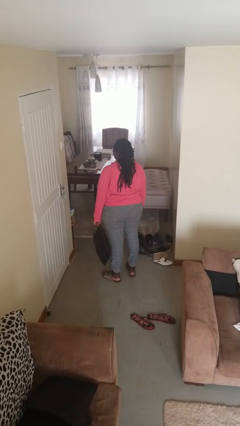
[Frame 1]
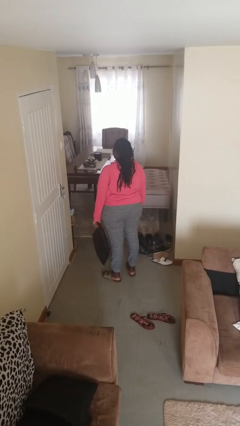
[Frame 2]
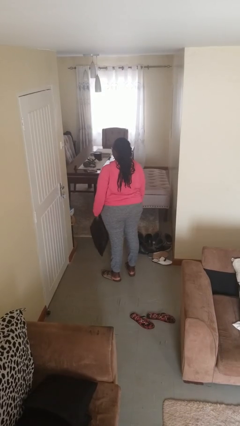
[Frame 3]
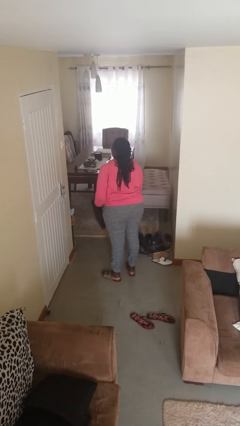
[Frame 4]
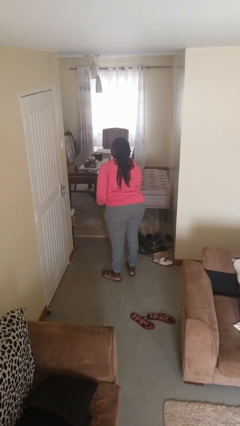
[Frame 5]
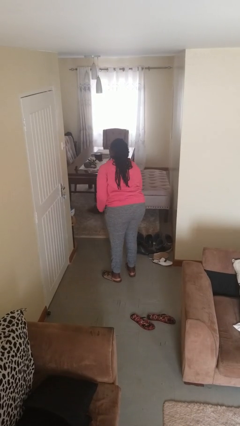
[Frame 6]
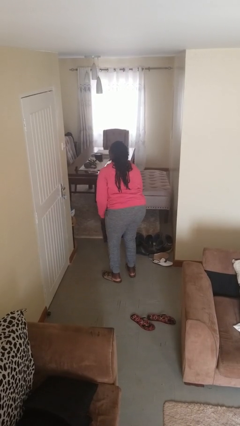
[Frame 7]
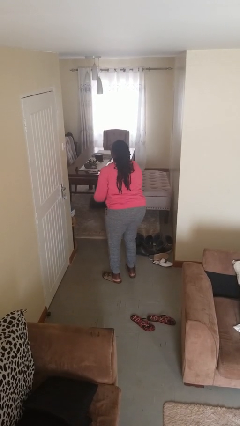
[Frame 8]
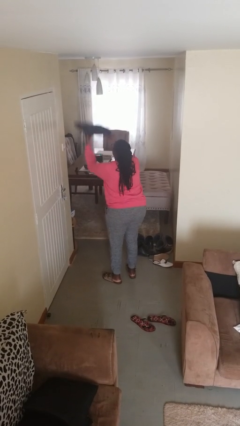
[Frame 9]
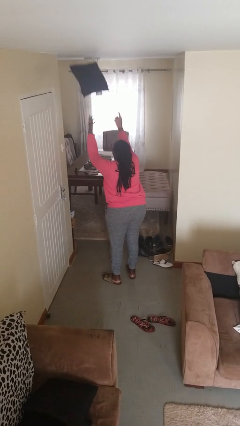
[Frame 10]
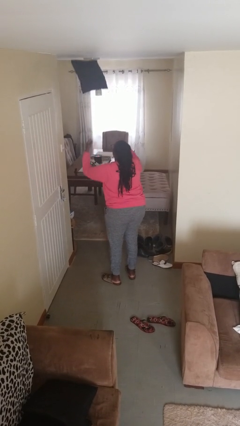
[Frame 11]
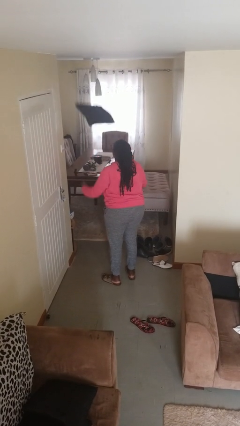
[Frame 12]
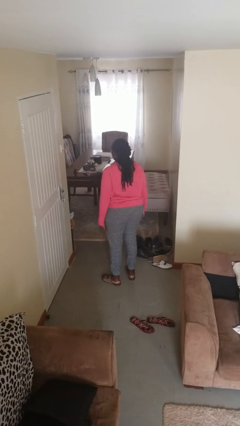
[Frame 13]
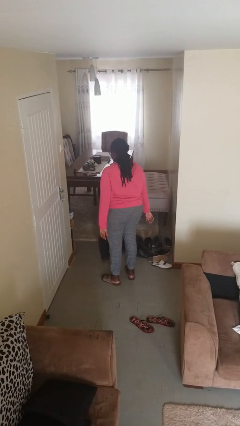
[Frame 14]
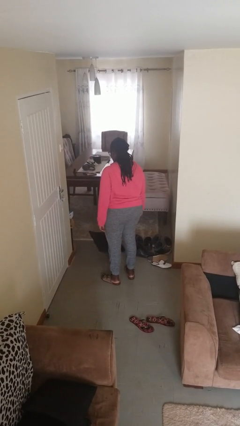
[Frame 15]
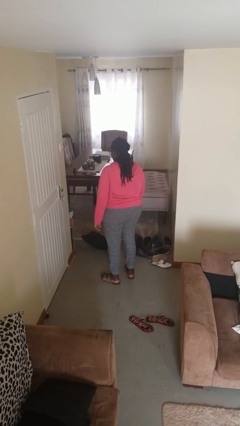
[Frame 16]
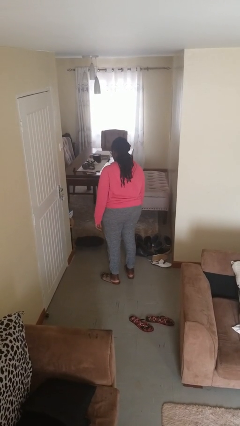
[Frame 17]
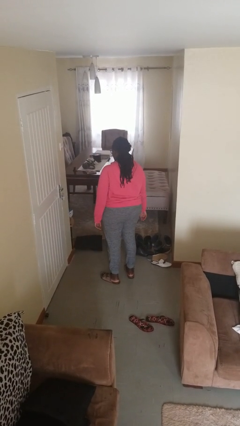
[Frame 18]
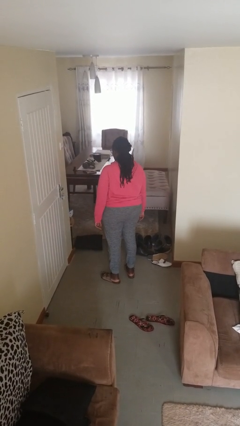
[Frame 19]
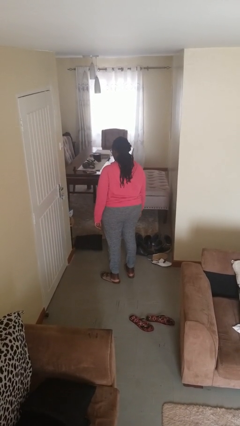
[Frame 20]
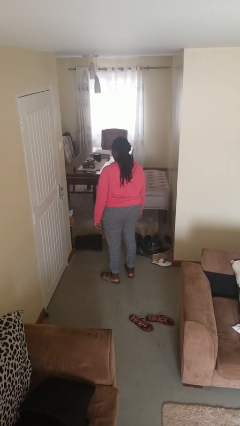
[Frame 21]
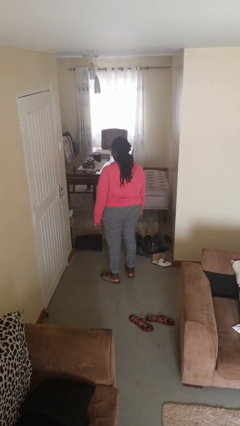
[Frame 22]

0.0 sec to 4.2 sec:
person throws object into air

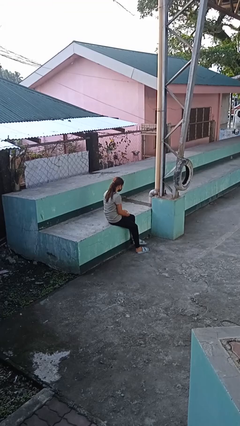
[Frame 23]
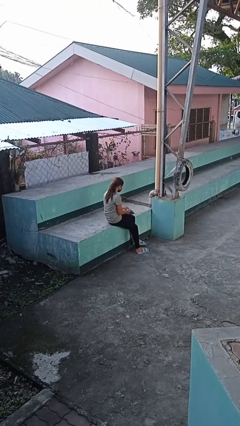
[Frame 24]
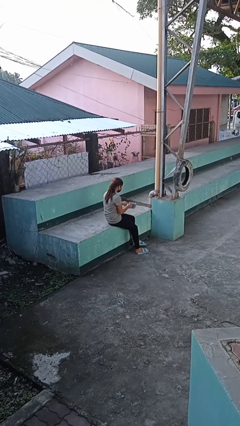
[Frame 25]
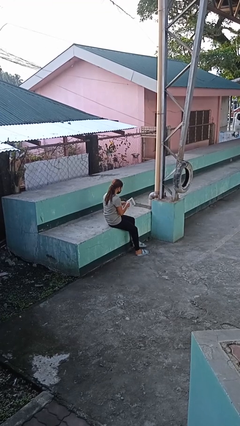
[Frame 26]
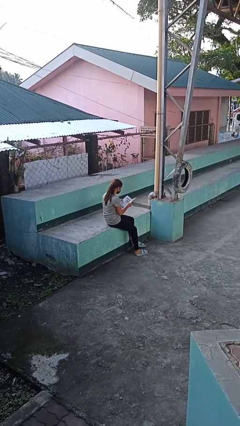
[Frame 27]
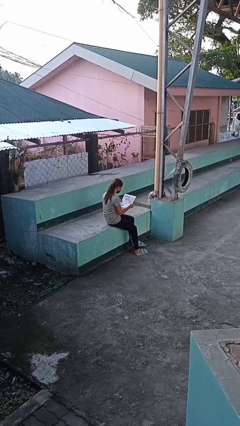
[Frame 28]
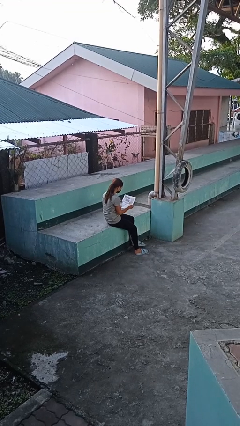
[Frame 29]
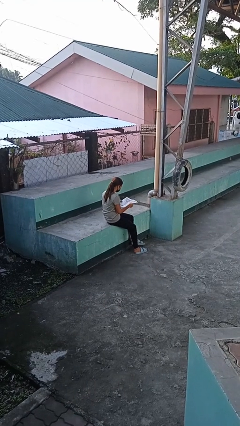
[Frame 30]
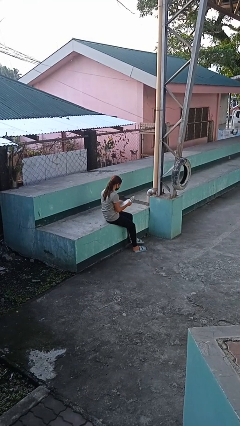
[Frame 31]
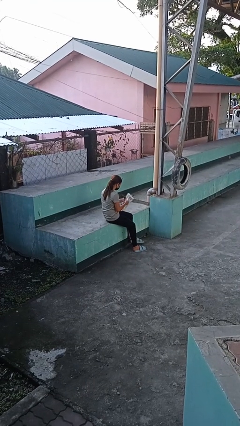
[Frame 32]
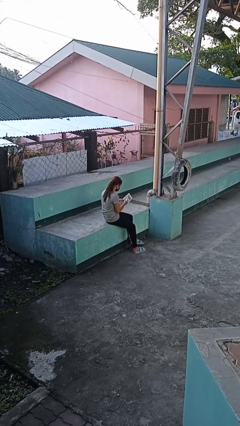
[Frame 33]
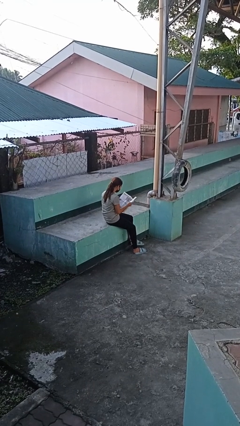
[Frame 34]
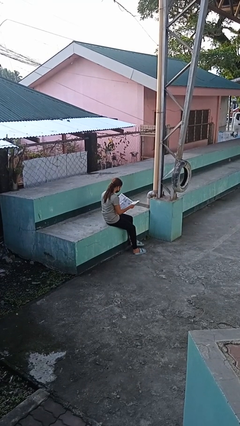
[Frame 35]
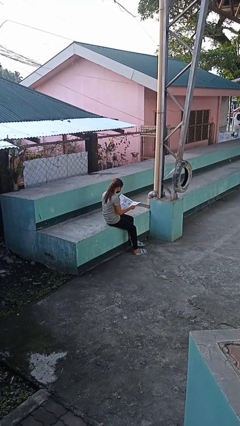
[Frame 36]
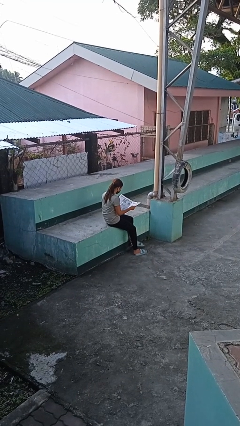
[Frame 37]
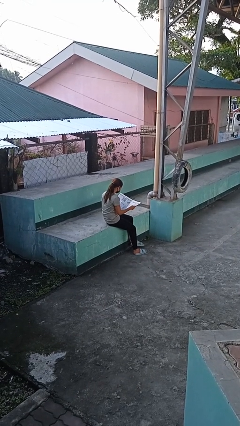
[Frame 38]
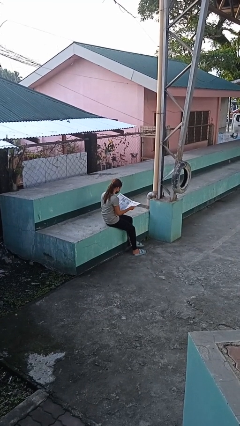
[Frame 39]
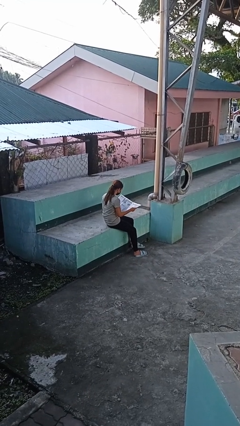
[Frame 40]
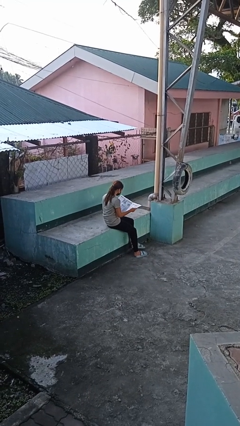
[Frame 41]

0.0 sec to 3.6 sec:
person reads newspaper

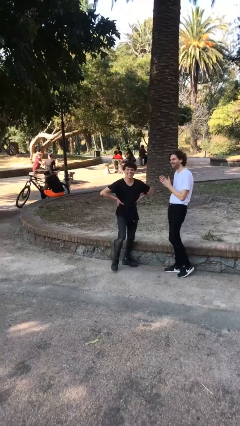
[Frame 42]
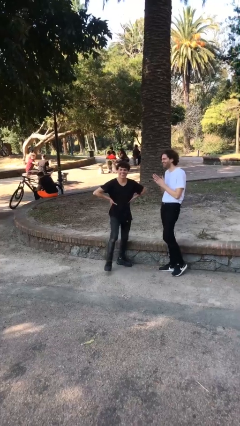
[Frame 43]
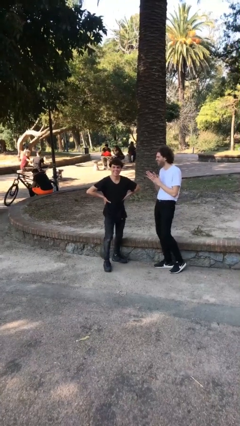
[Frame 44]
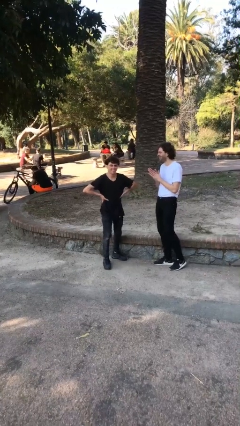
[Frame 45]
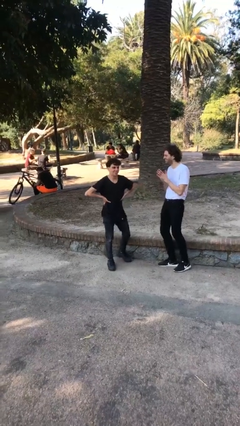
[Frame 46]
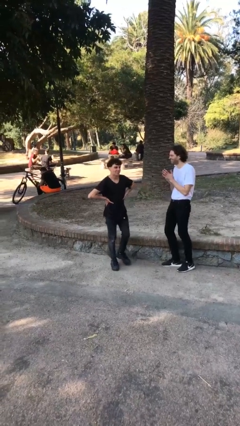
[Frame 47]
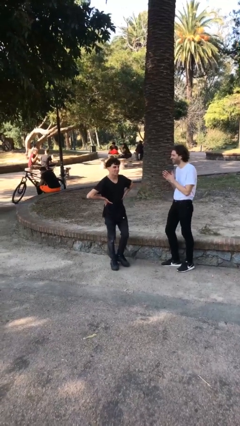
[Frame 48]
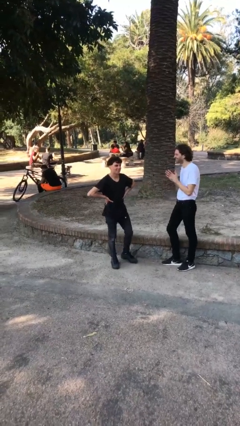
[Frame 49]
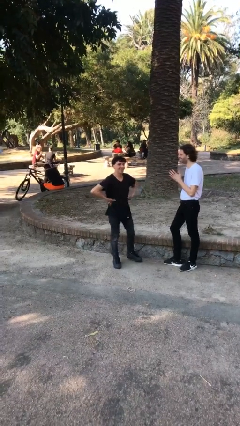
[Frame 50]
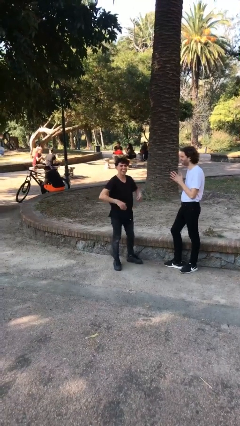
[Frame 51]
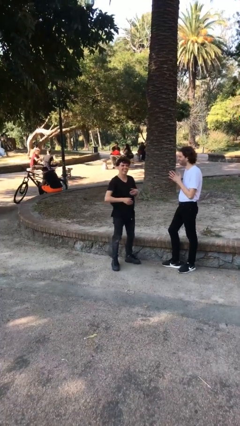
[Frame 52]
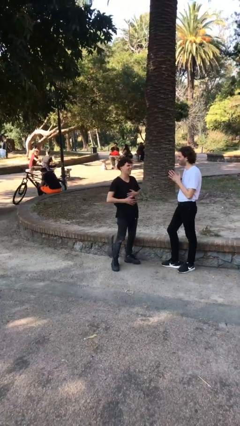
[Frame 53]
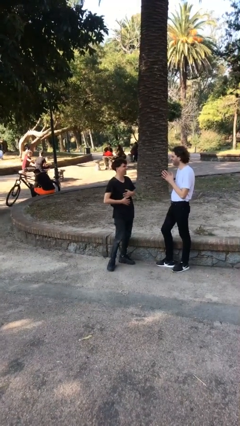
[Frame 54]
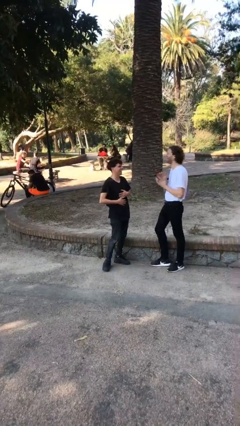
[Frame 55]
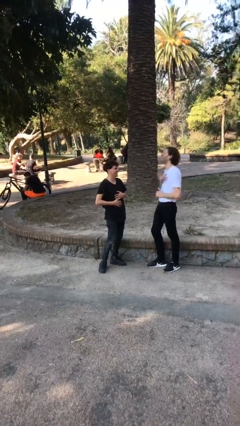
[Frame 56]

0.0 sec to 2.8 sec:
person laughs with person

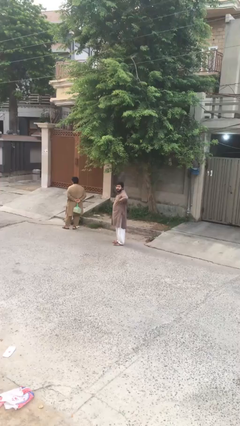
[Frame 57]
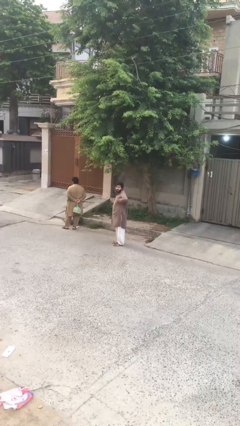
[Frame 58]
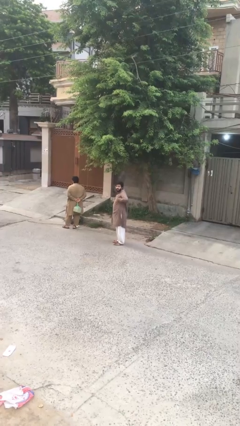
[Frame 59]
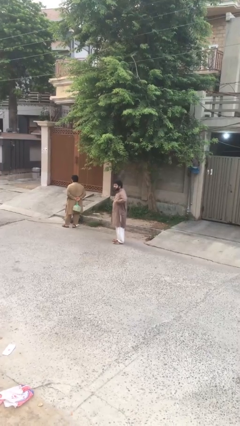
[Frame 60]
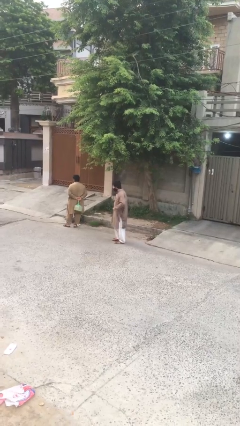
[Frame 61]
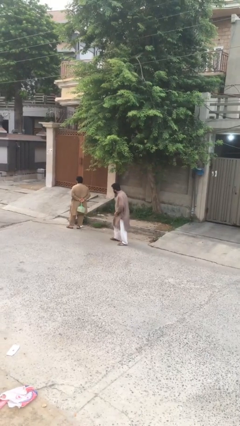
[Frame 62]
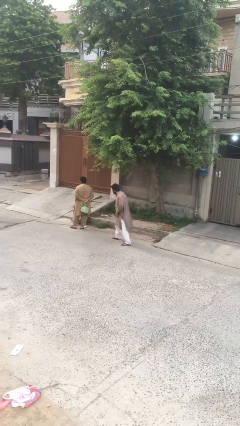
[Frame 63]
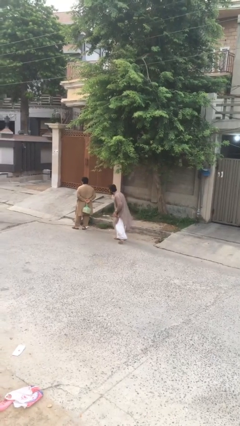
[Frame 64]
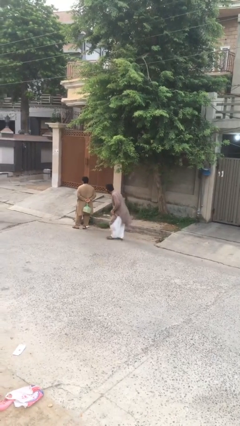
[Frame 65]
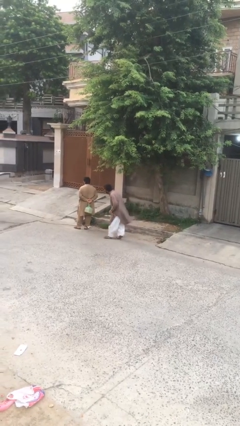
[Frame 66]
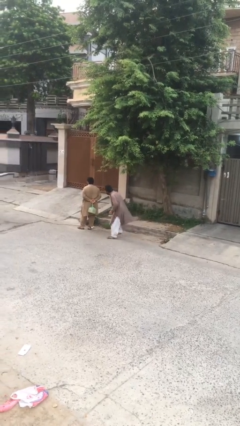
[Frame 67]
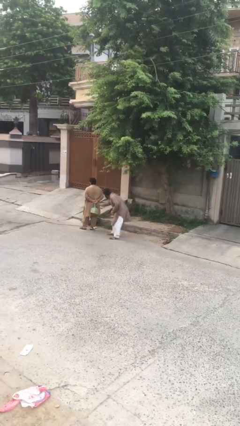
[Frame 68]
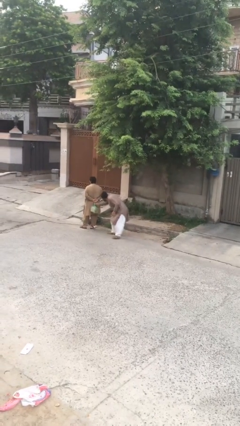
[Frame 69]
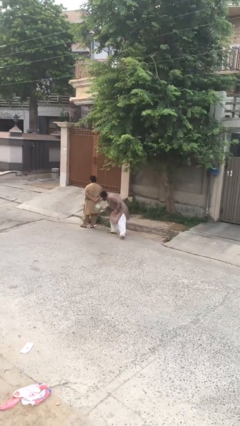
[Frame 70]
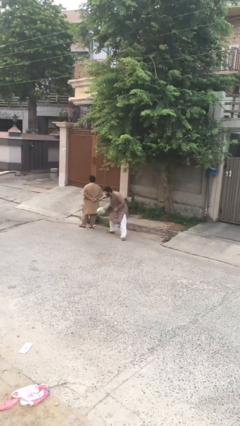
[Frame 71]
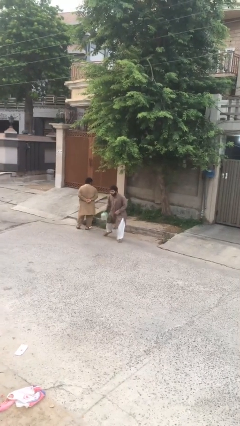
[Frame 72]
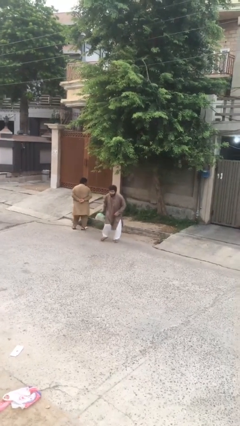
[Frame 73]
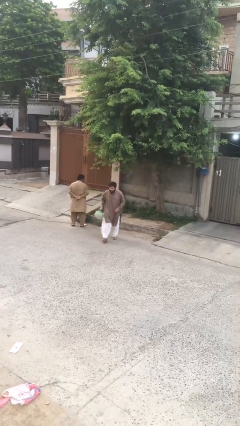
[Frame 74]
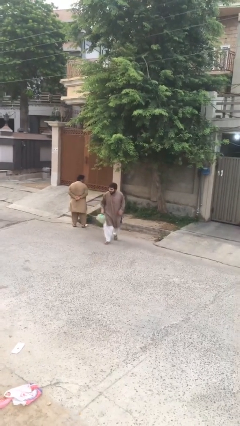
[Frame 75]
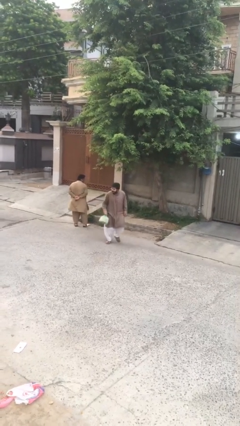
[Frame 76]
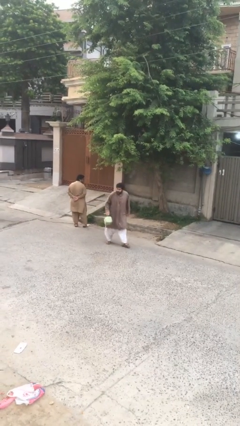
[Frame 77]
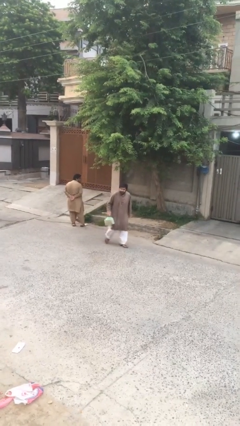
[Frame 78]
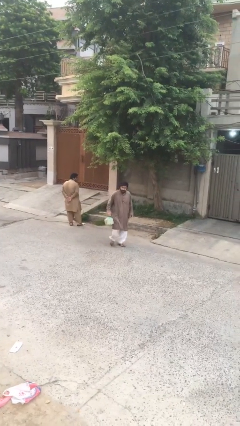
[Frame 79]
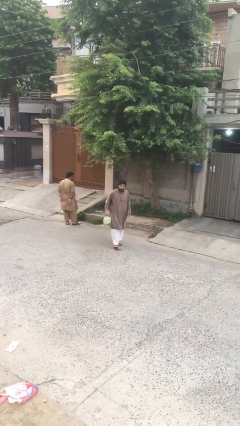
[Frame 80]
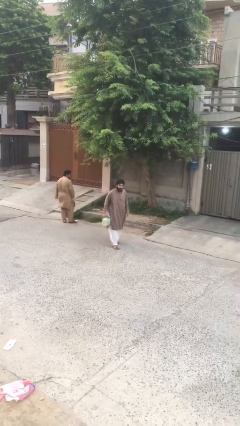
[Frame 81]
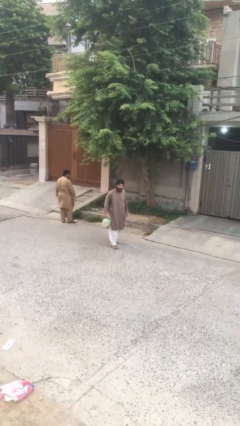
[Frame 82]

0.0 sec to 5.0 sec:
person steals object from person

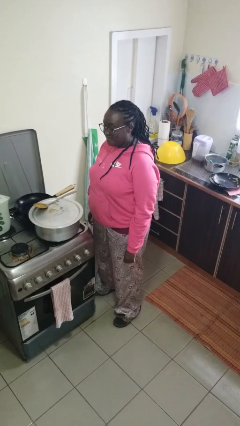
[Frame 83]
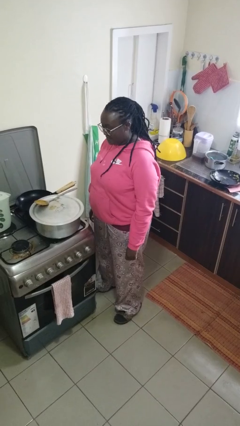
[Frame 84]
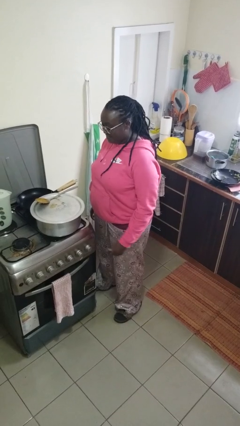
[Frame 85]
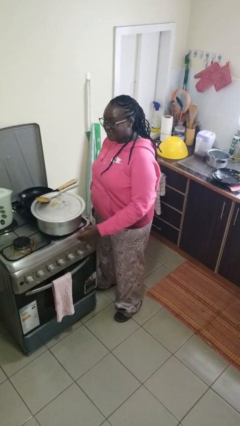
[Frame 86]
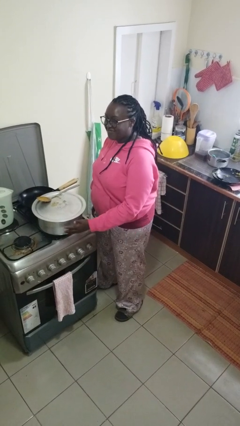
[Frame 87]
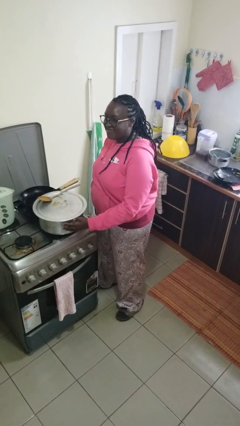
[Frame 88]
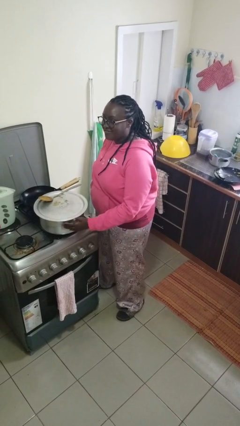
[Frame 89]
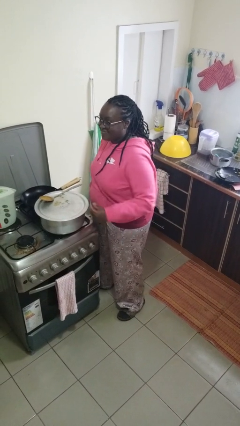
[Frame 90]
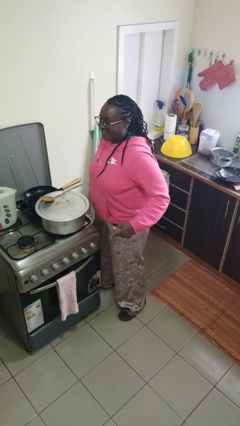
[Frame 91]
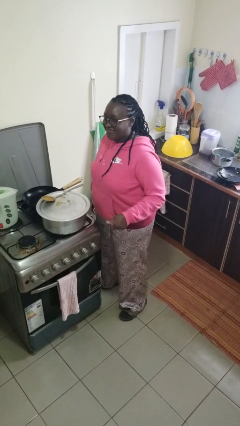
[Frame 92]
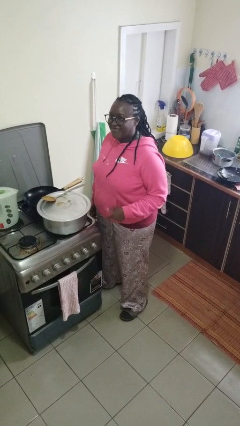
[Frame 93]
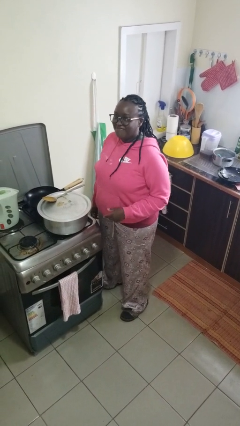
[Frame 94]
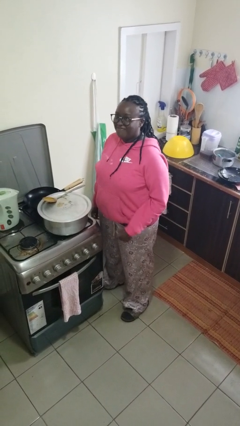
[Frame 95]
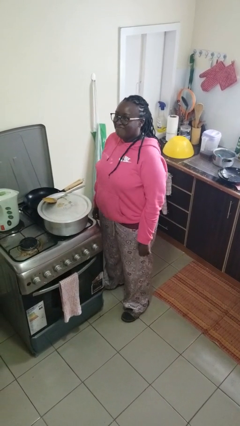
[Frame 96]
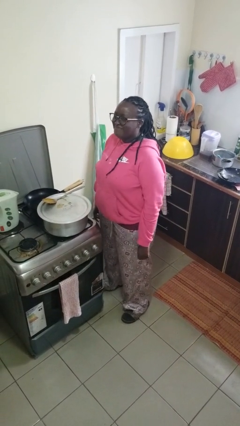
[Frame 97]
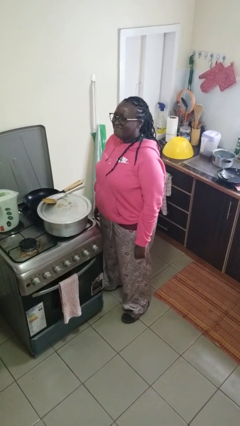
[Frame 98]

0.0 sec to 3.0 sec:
person burns hand
